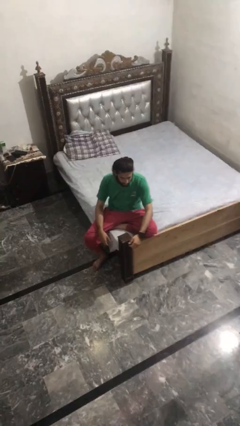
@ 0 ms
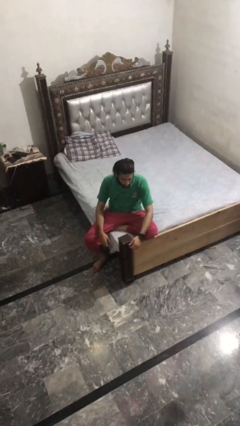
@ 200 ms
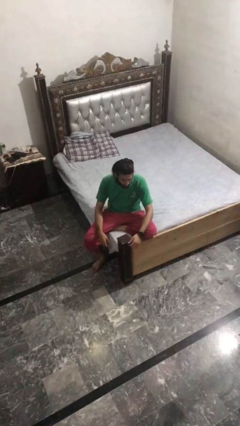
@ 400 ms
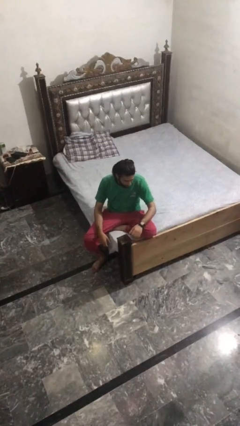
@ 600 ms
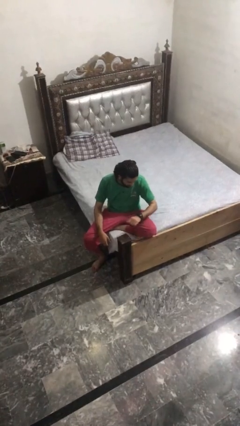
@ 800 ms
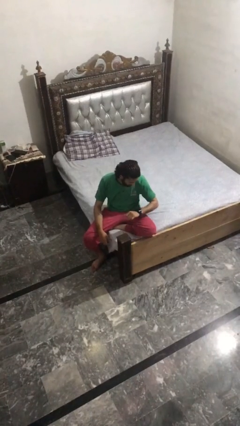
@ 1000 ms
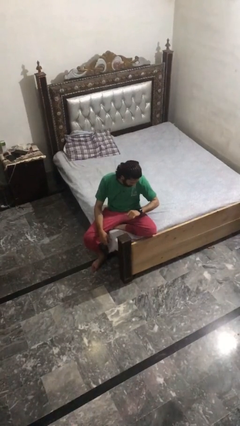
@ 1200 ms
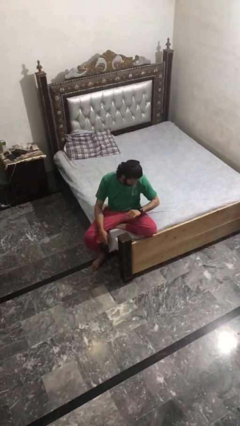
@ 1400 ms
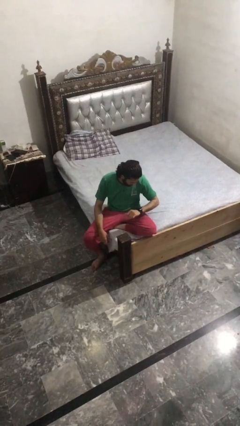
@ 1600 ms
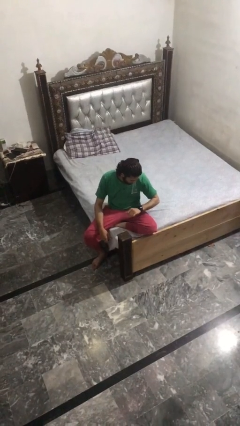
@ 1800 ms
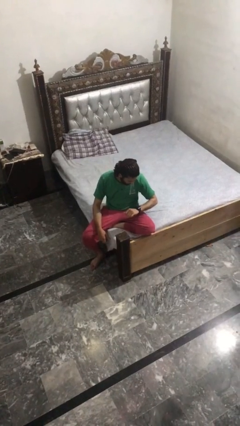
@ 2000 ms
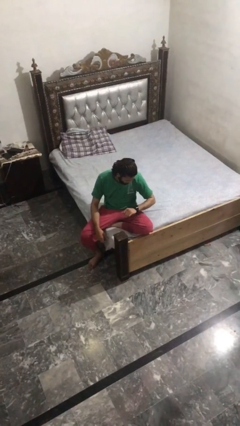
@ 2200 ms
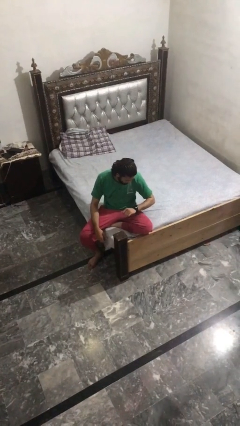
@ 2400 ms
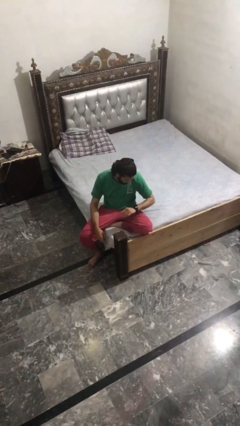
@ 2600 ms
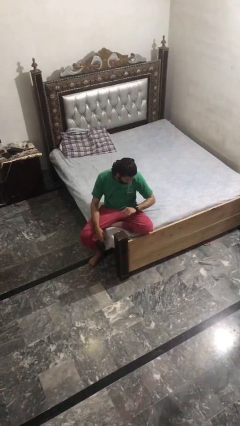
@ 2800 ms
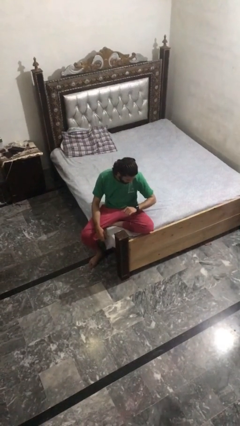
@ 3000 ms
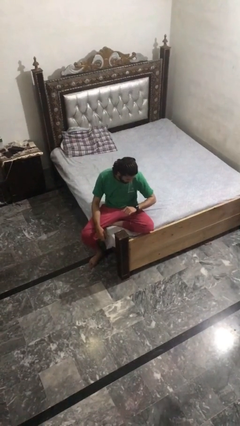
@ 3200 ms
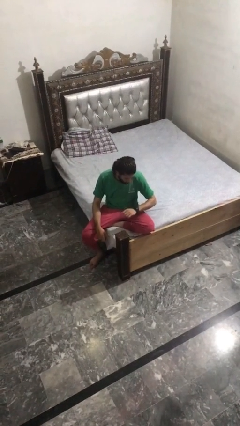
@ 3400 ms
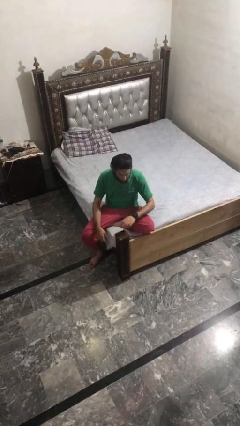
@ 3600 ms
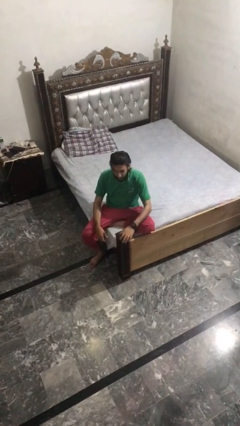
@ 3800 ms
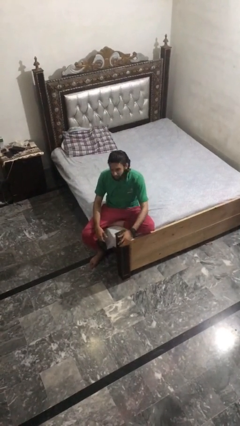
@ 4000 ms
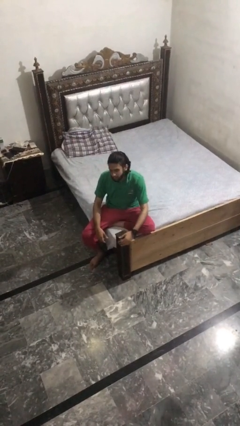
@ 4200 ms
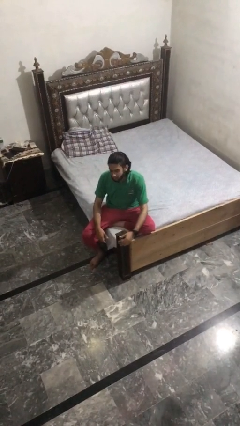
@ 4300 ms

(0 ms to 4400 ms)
person looks at wristwatch

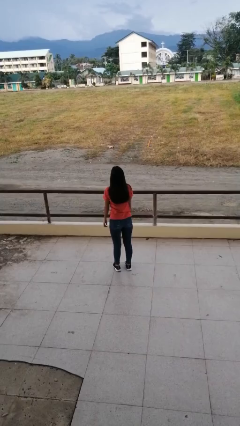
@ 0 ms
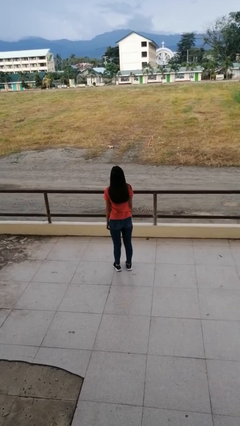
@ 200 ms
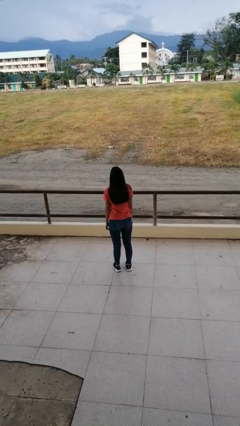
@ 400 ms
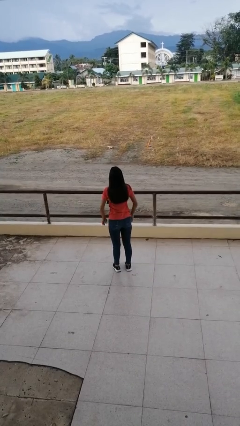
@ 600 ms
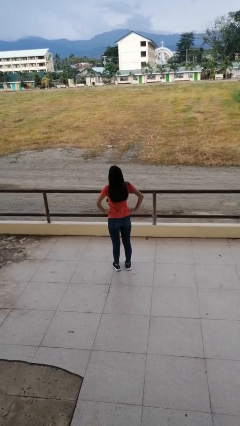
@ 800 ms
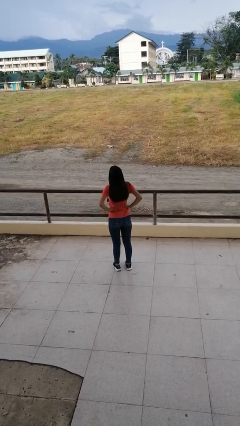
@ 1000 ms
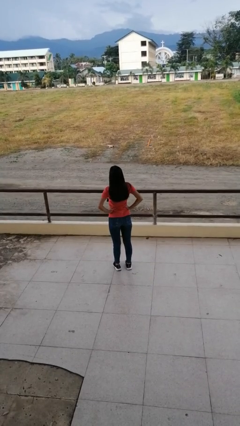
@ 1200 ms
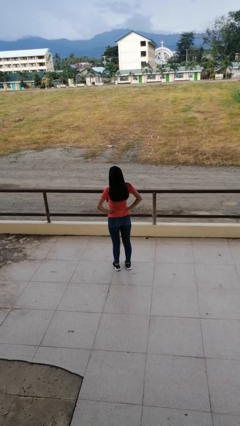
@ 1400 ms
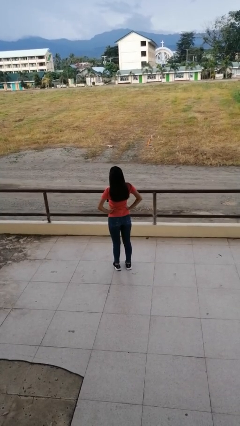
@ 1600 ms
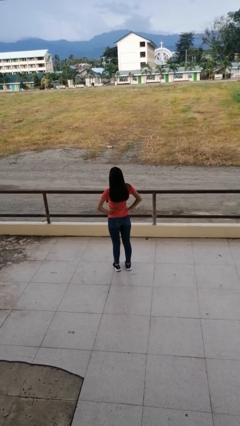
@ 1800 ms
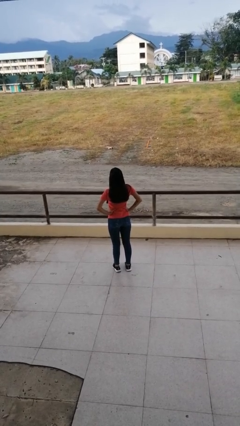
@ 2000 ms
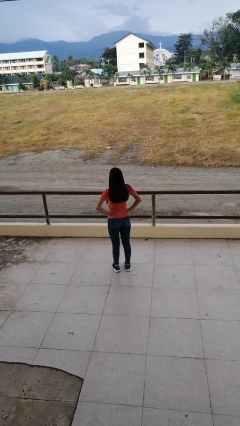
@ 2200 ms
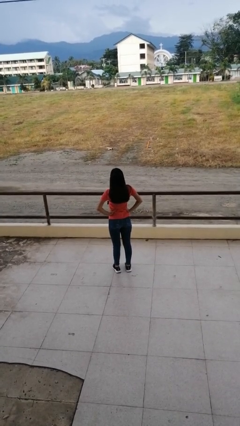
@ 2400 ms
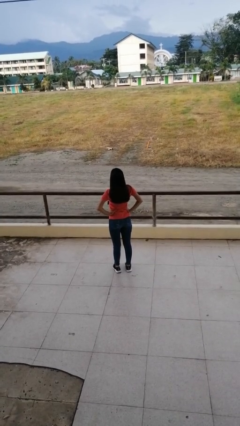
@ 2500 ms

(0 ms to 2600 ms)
person stretches back

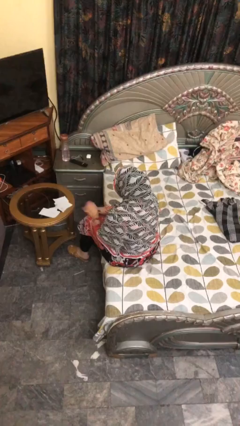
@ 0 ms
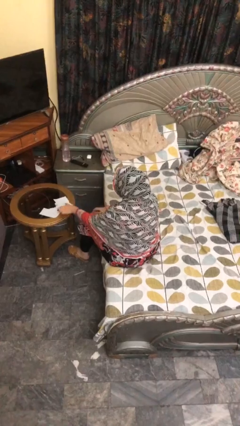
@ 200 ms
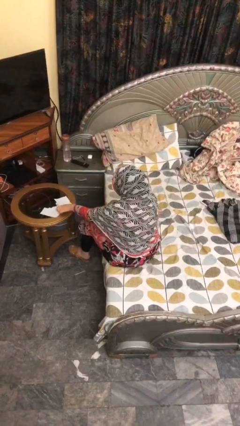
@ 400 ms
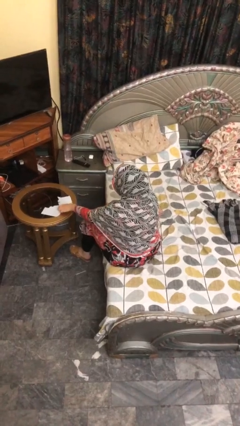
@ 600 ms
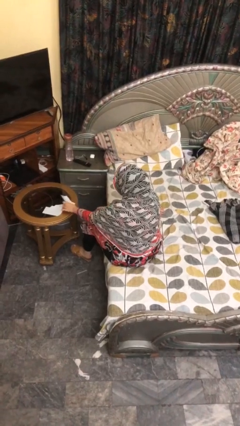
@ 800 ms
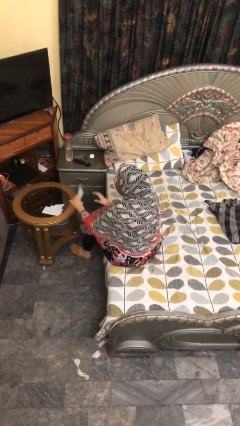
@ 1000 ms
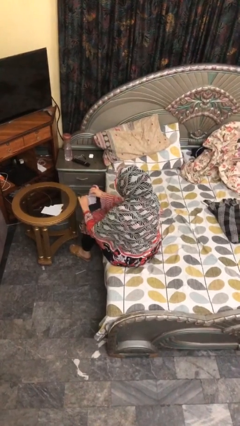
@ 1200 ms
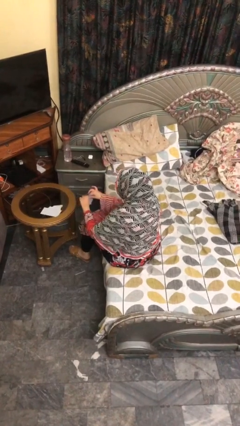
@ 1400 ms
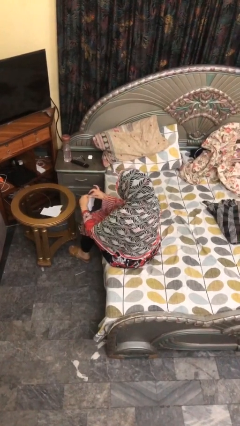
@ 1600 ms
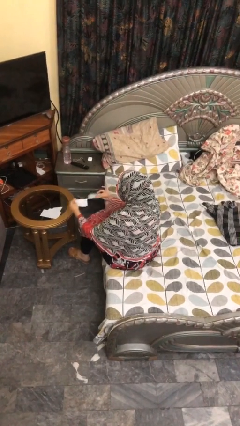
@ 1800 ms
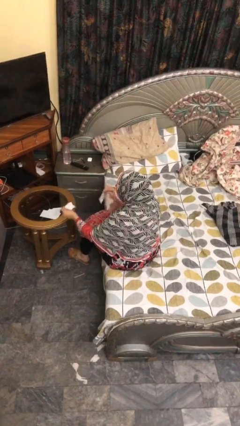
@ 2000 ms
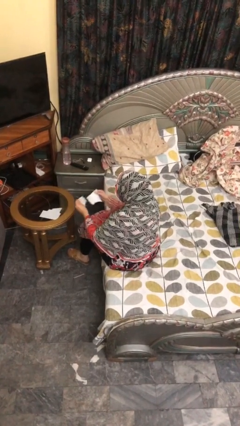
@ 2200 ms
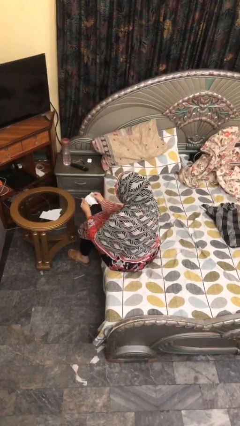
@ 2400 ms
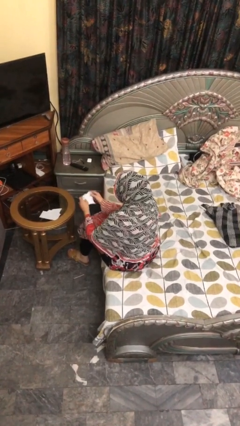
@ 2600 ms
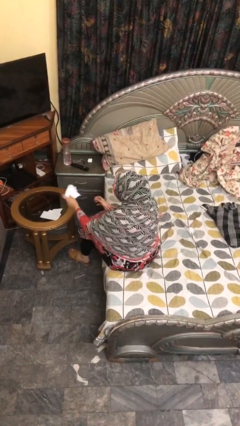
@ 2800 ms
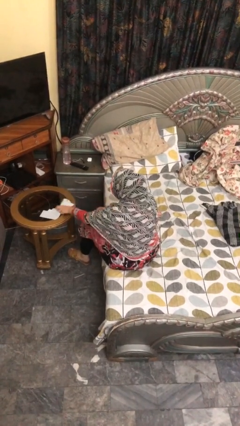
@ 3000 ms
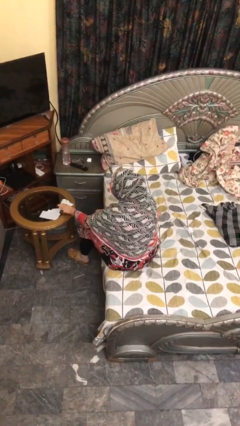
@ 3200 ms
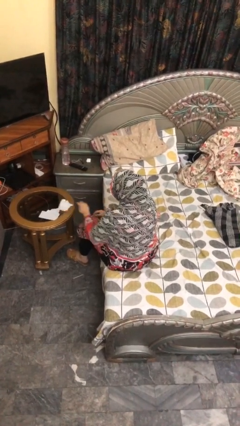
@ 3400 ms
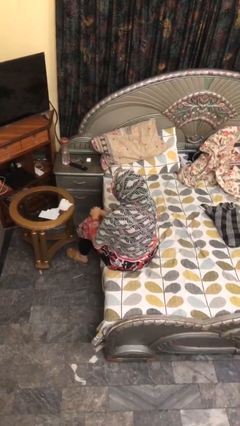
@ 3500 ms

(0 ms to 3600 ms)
person tears paper

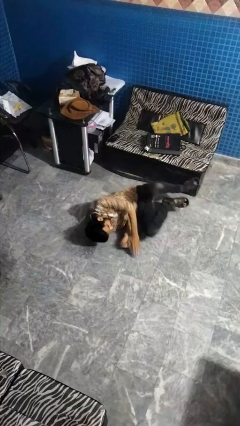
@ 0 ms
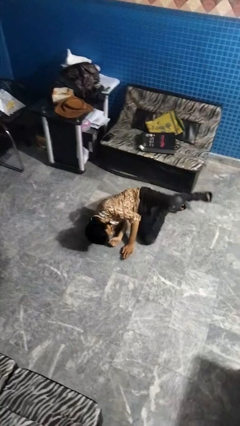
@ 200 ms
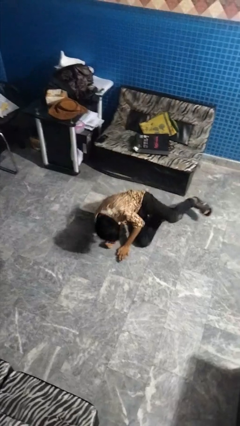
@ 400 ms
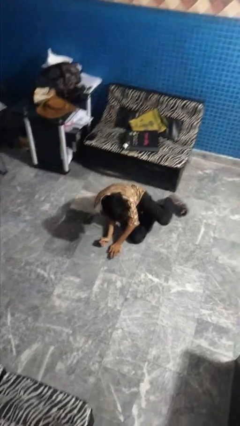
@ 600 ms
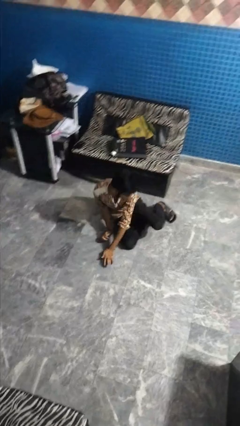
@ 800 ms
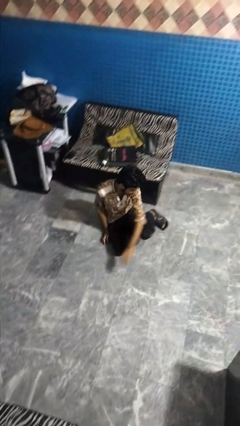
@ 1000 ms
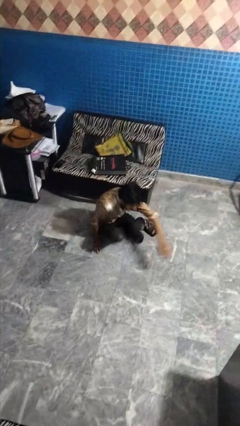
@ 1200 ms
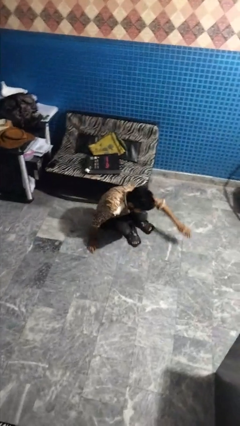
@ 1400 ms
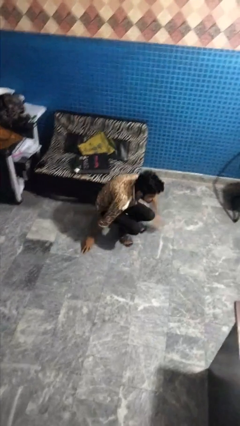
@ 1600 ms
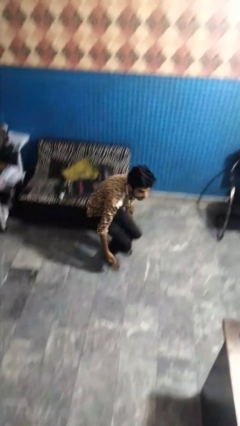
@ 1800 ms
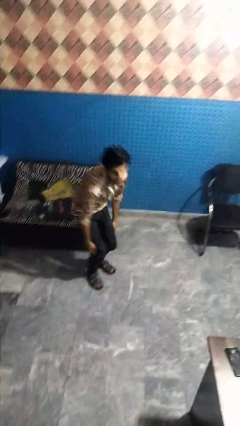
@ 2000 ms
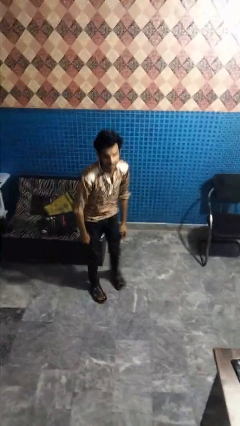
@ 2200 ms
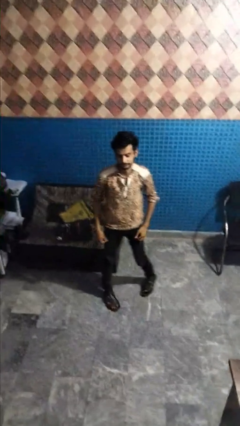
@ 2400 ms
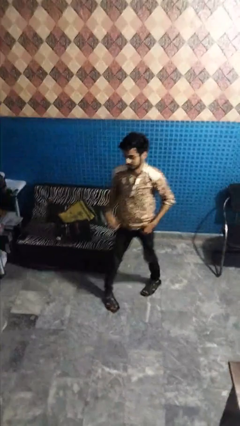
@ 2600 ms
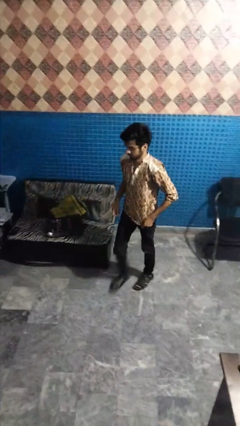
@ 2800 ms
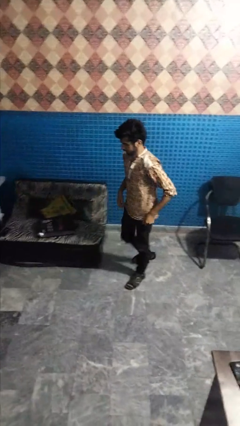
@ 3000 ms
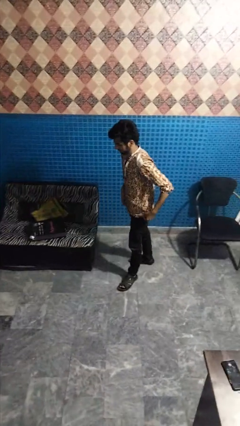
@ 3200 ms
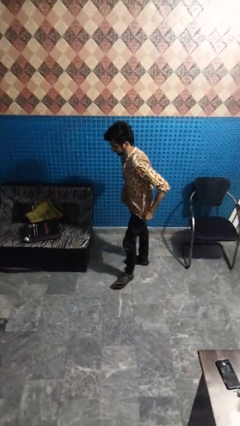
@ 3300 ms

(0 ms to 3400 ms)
person stands up from floor

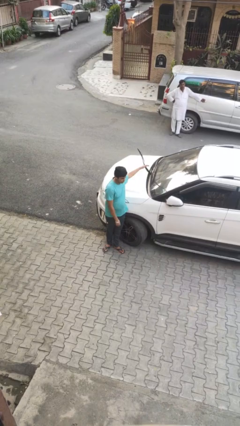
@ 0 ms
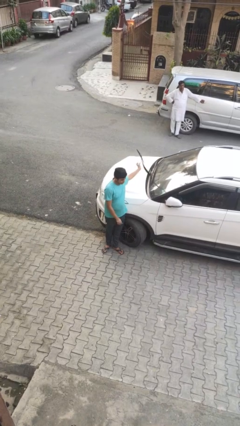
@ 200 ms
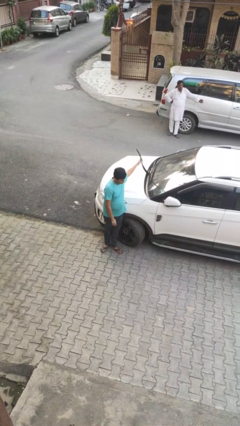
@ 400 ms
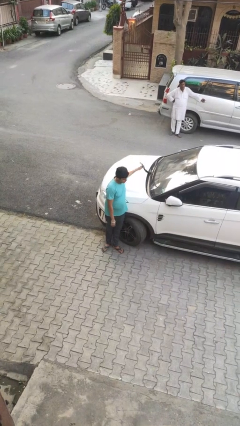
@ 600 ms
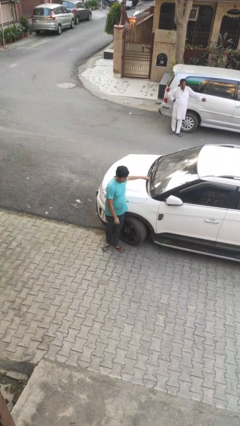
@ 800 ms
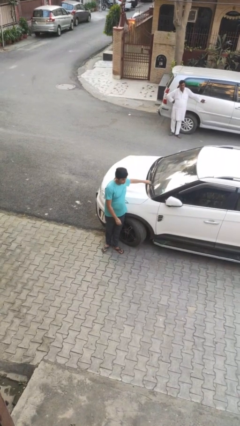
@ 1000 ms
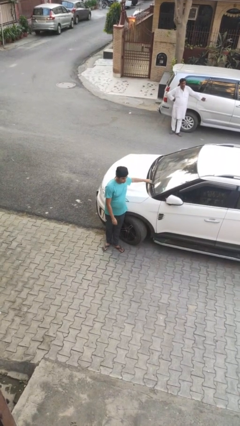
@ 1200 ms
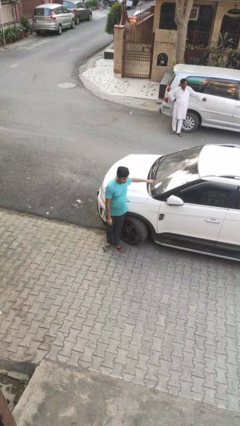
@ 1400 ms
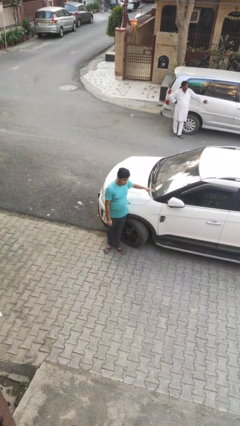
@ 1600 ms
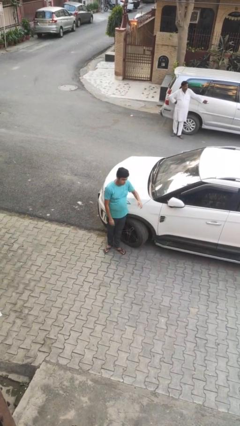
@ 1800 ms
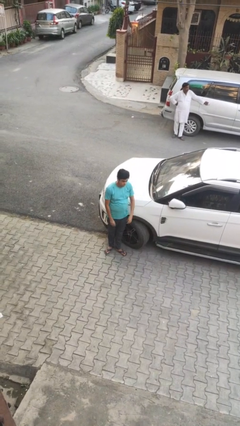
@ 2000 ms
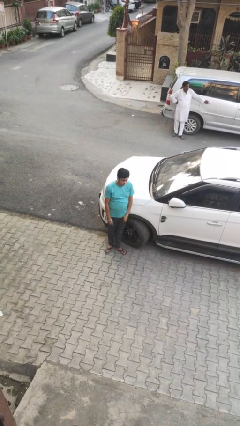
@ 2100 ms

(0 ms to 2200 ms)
person flips down car wipers

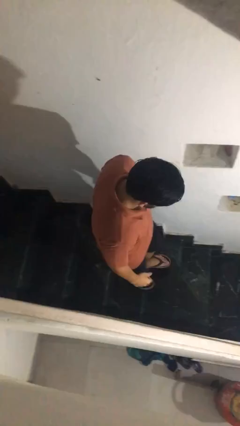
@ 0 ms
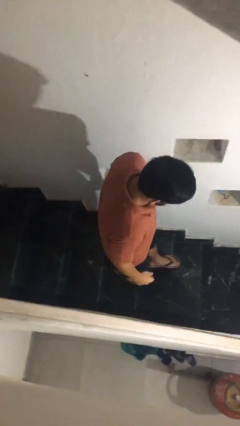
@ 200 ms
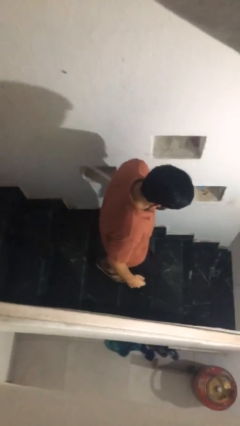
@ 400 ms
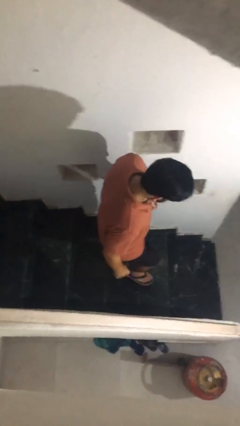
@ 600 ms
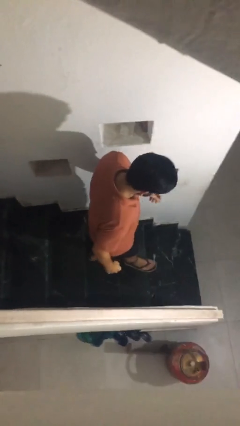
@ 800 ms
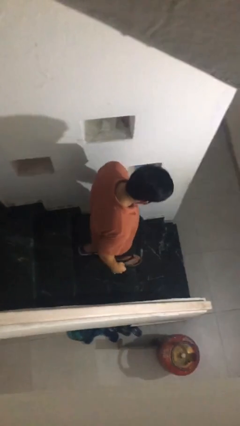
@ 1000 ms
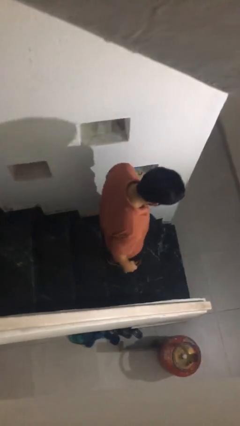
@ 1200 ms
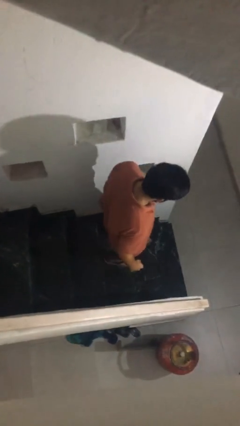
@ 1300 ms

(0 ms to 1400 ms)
person climbs down stairs
